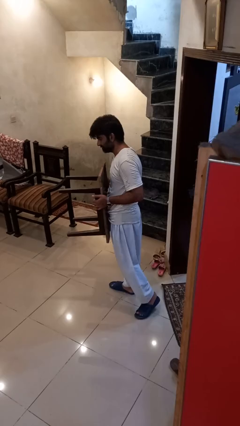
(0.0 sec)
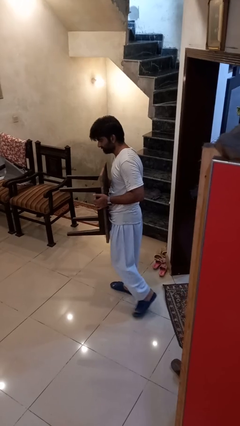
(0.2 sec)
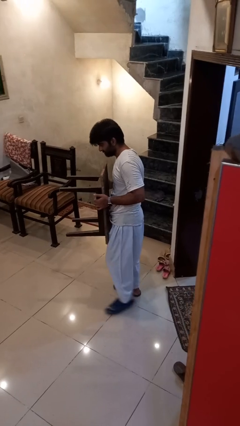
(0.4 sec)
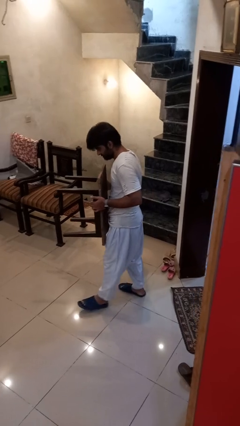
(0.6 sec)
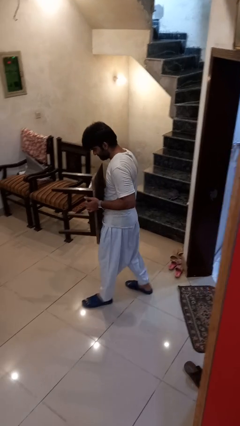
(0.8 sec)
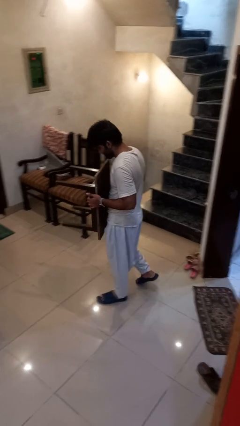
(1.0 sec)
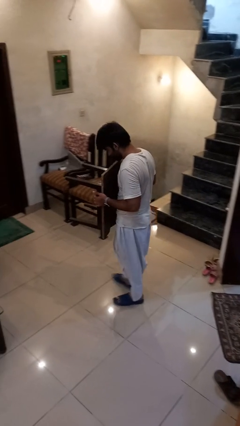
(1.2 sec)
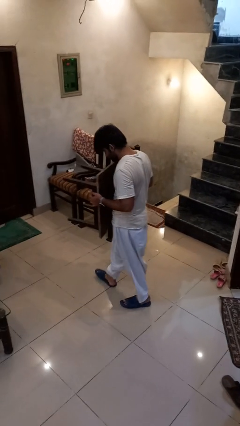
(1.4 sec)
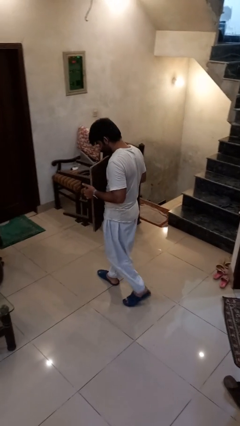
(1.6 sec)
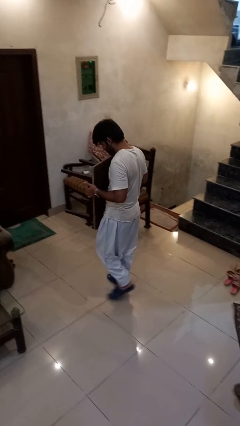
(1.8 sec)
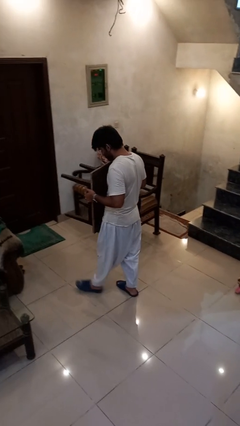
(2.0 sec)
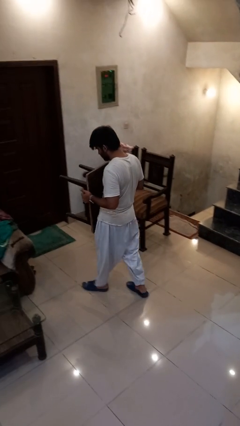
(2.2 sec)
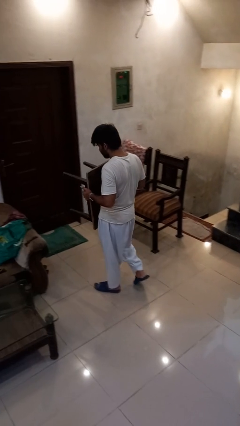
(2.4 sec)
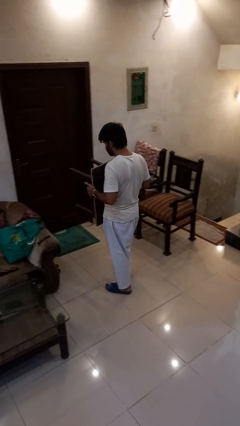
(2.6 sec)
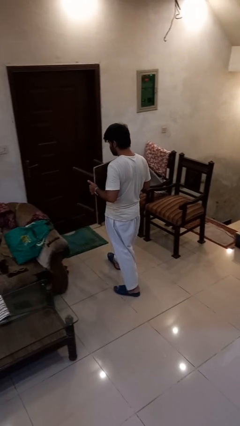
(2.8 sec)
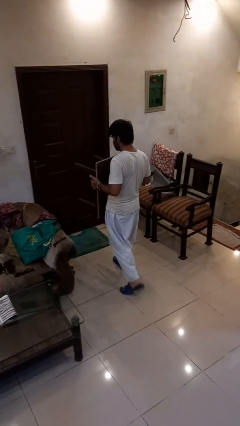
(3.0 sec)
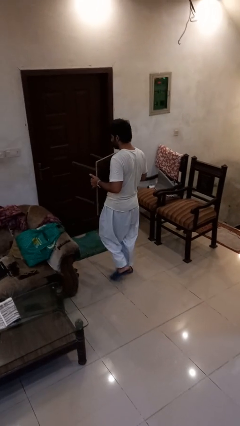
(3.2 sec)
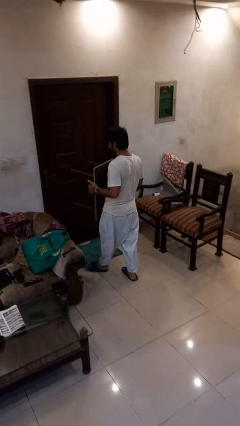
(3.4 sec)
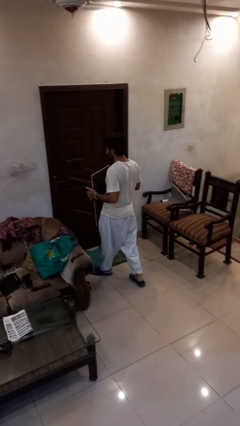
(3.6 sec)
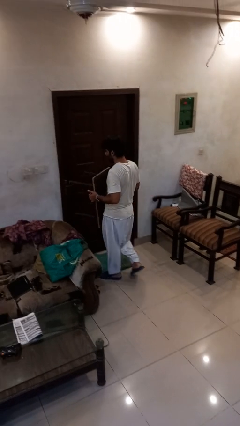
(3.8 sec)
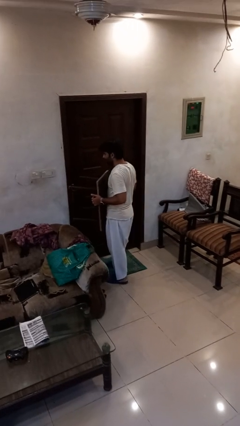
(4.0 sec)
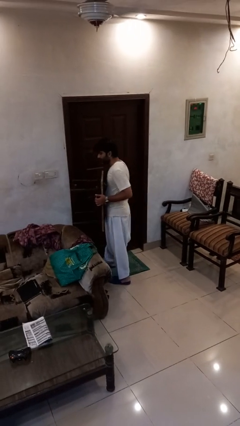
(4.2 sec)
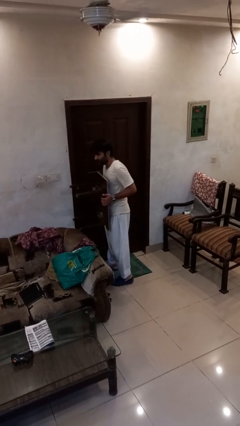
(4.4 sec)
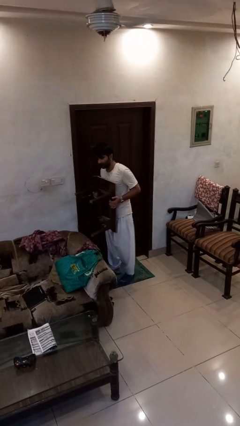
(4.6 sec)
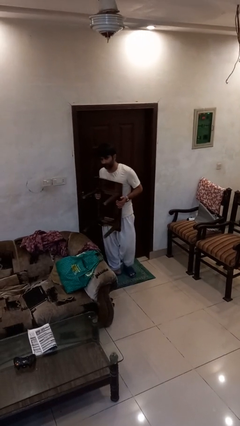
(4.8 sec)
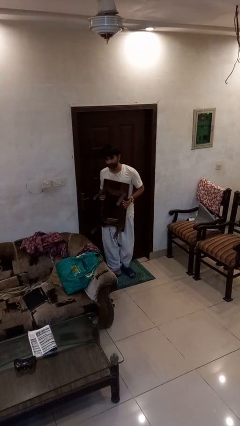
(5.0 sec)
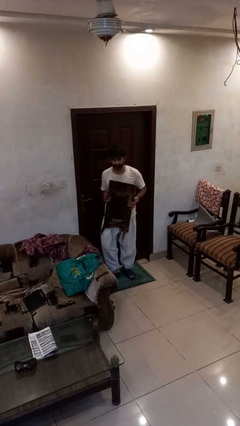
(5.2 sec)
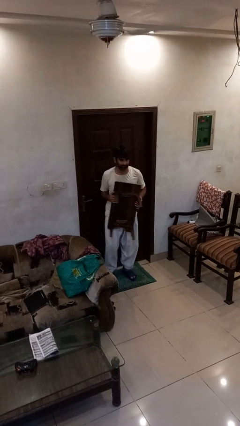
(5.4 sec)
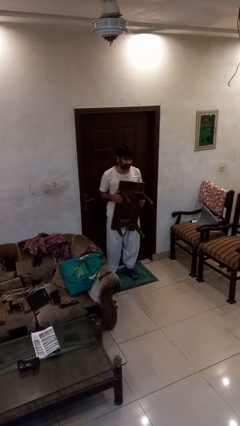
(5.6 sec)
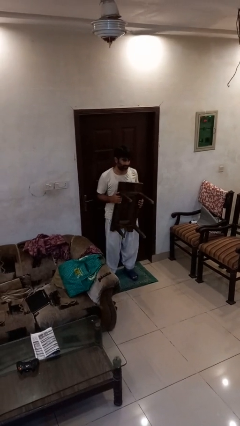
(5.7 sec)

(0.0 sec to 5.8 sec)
person carries furniture

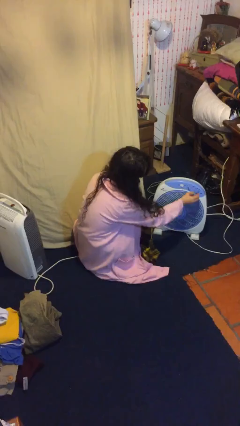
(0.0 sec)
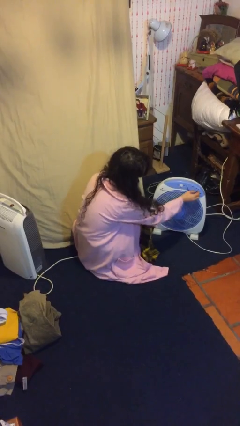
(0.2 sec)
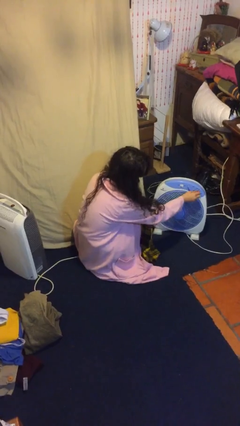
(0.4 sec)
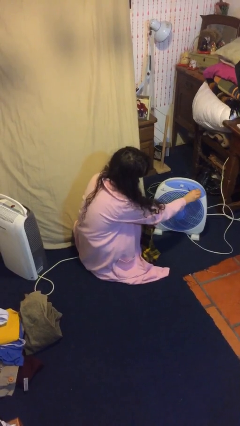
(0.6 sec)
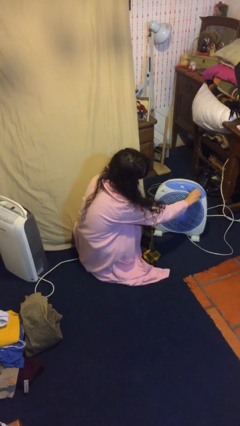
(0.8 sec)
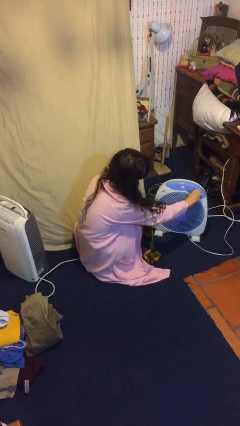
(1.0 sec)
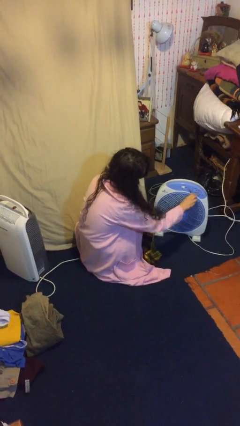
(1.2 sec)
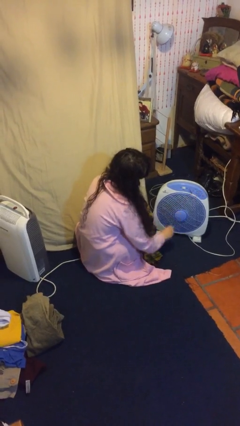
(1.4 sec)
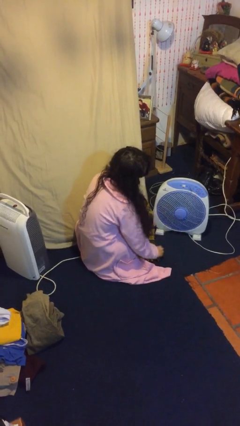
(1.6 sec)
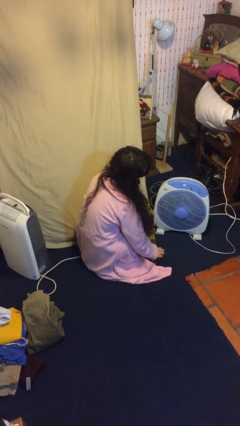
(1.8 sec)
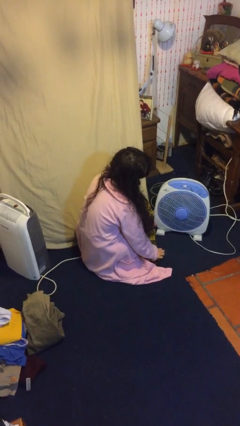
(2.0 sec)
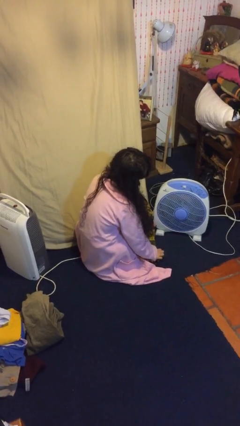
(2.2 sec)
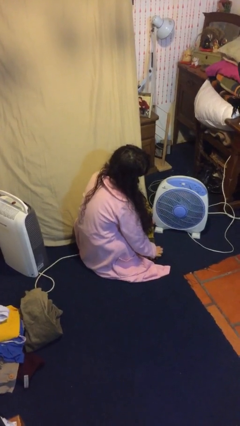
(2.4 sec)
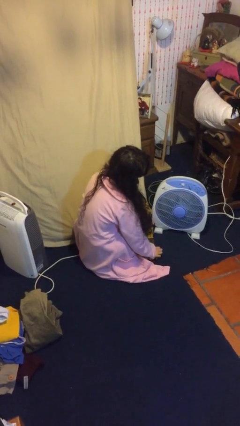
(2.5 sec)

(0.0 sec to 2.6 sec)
person turns on fan

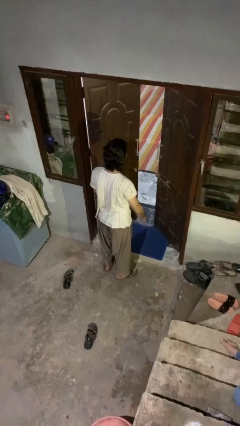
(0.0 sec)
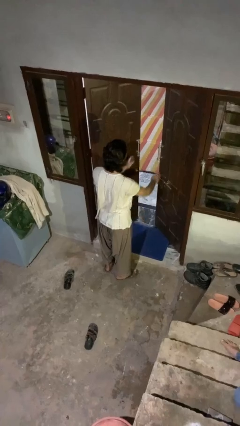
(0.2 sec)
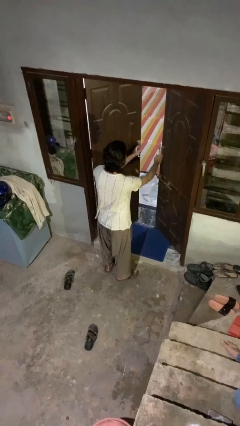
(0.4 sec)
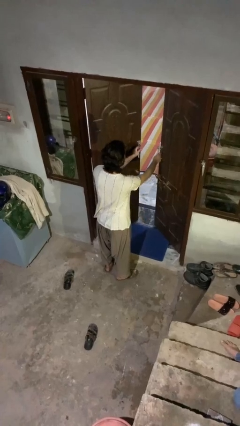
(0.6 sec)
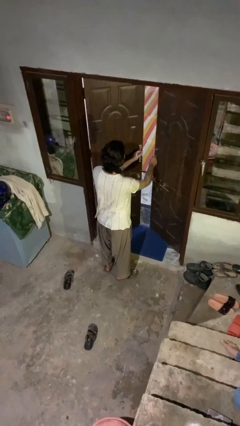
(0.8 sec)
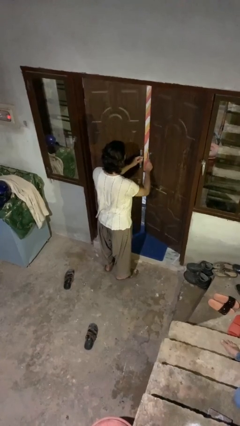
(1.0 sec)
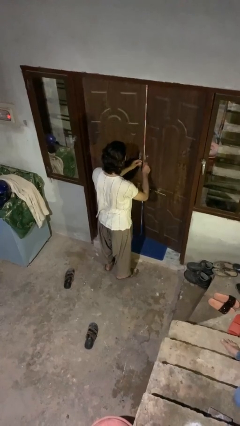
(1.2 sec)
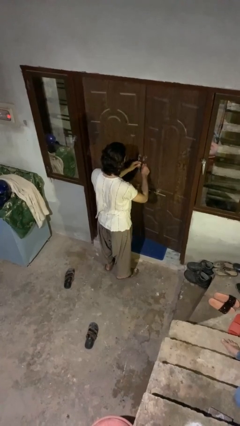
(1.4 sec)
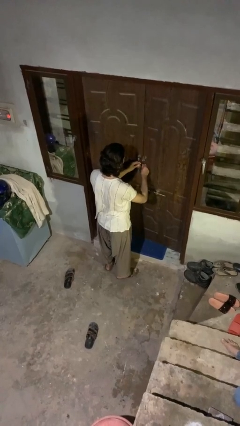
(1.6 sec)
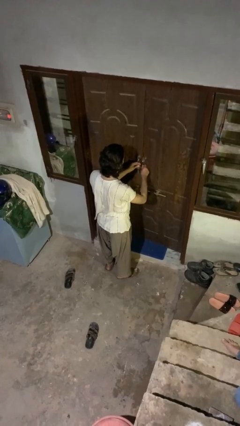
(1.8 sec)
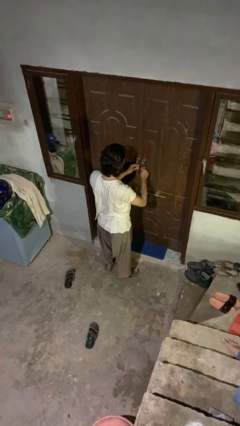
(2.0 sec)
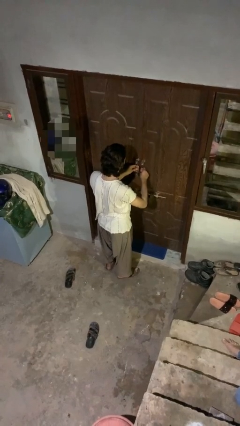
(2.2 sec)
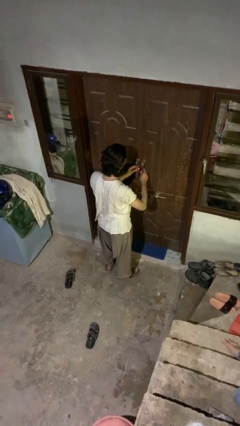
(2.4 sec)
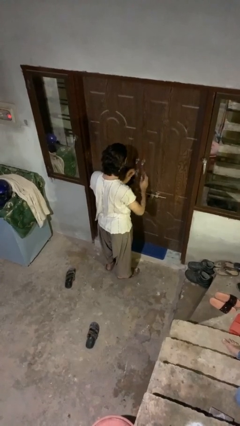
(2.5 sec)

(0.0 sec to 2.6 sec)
person closes facility door

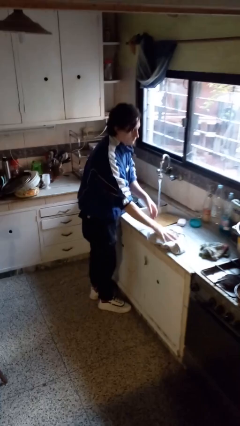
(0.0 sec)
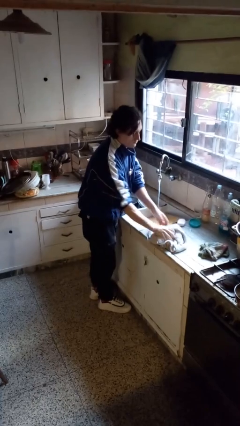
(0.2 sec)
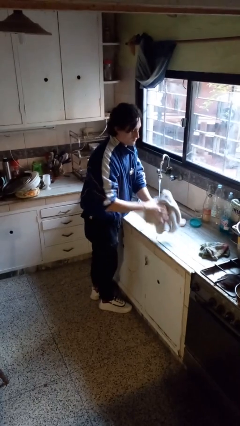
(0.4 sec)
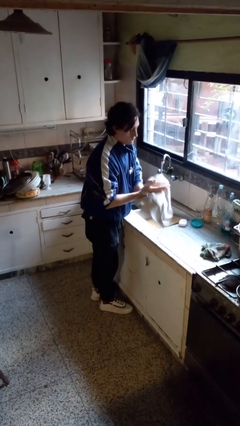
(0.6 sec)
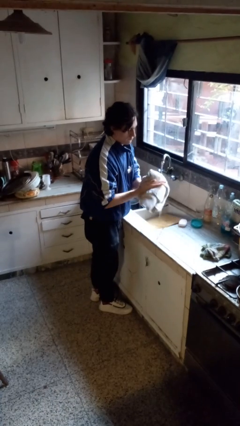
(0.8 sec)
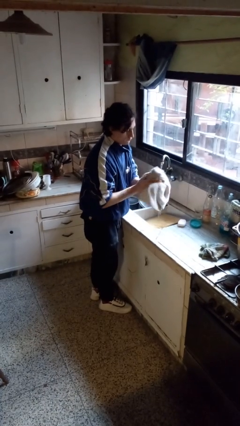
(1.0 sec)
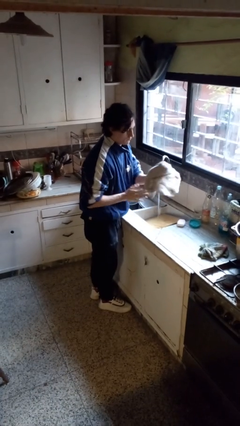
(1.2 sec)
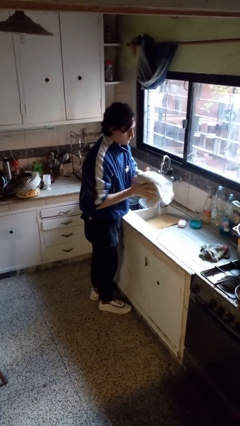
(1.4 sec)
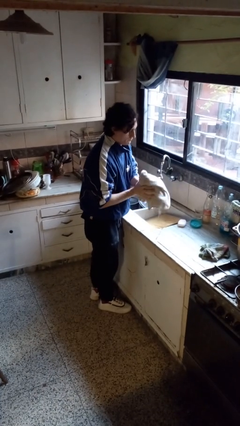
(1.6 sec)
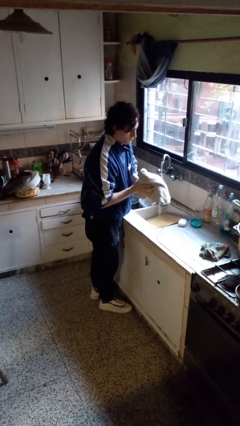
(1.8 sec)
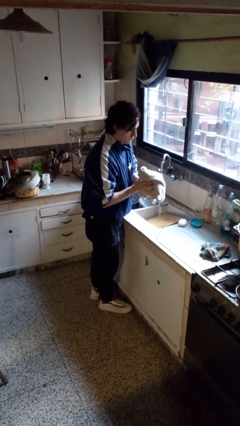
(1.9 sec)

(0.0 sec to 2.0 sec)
person dries hands with towel

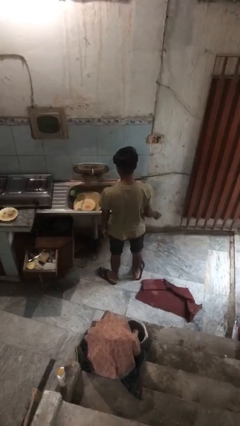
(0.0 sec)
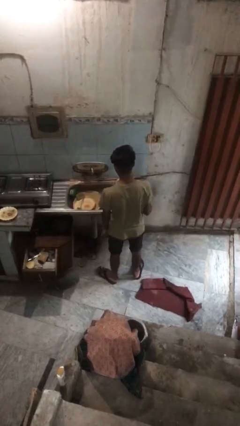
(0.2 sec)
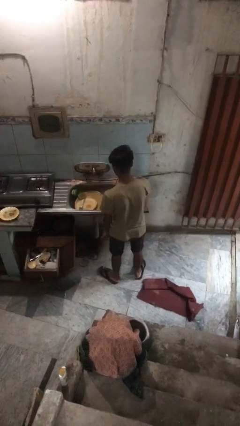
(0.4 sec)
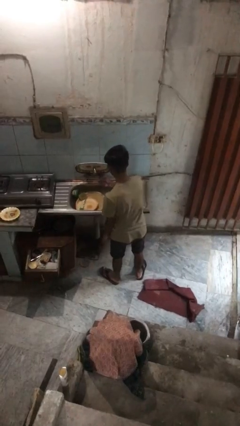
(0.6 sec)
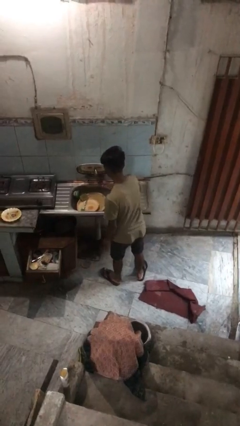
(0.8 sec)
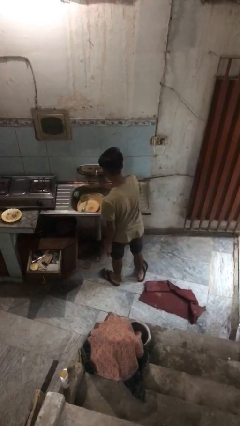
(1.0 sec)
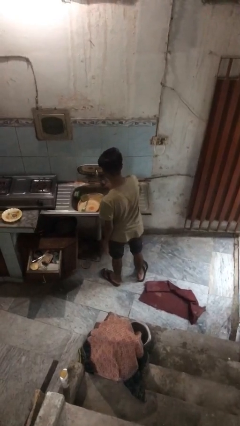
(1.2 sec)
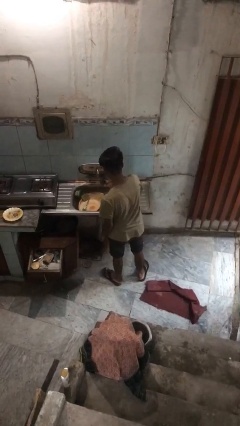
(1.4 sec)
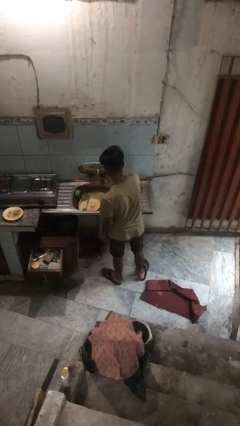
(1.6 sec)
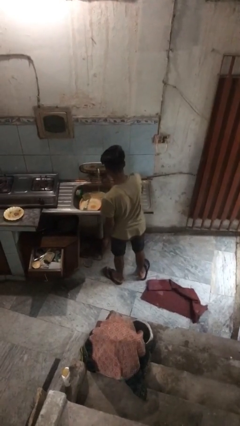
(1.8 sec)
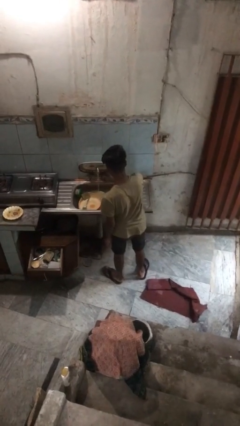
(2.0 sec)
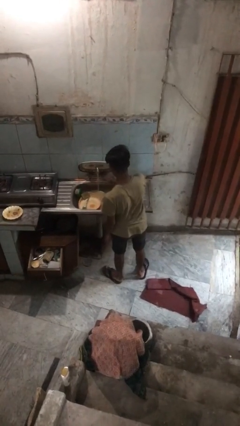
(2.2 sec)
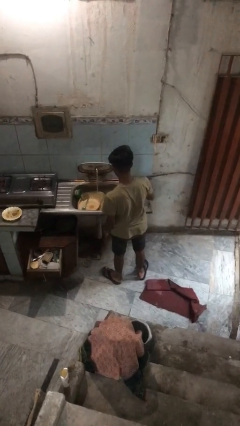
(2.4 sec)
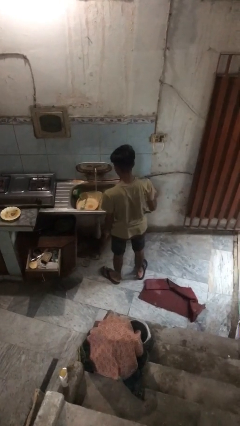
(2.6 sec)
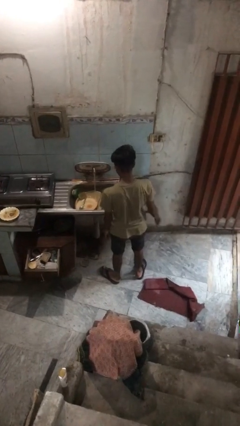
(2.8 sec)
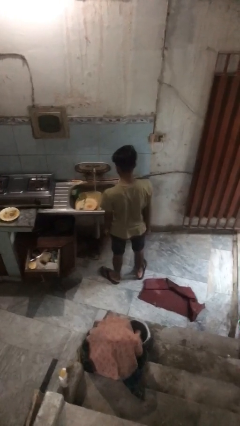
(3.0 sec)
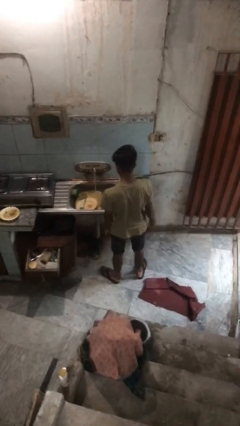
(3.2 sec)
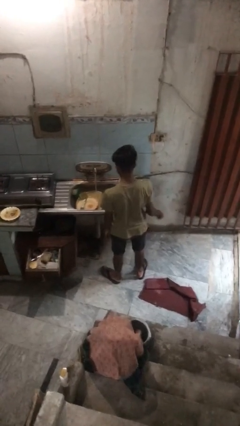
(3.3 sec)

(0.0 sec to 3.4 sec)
person turns on faucet

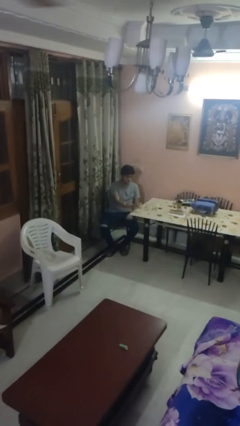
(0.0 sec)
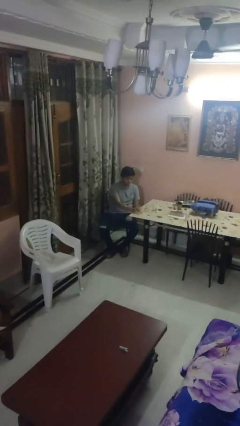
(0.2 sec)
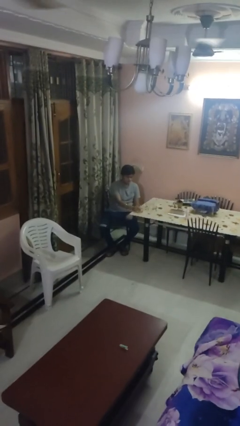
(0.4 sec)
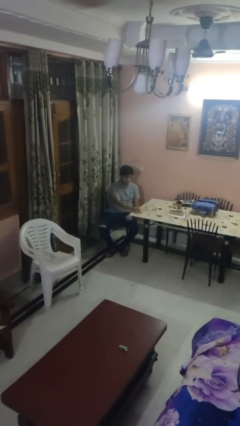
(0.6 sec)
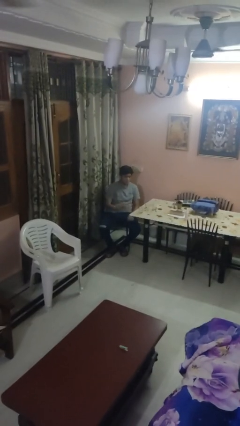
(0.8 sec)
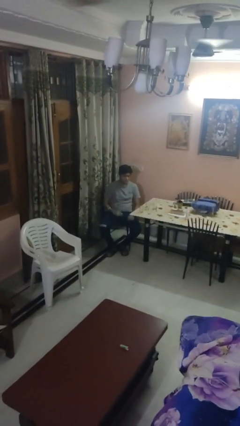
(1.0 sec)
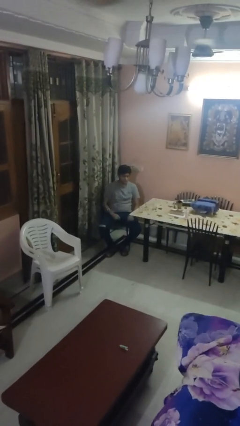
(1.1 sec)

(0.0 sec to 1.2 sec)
person puts down object on table
